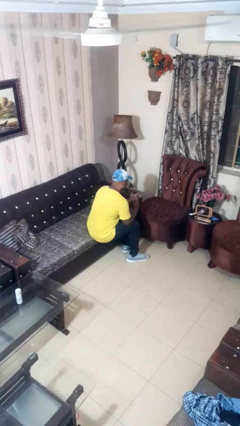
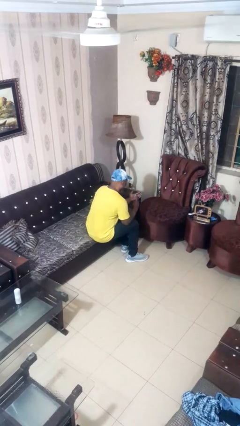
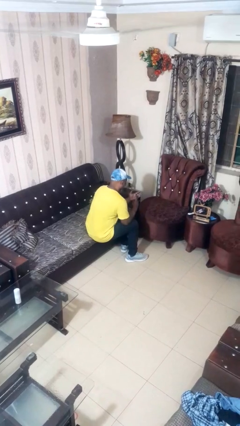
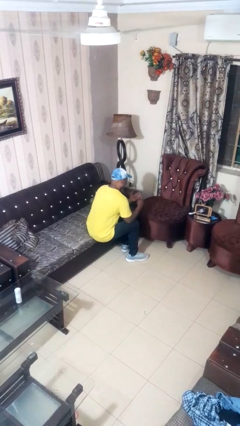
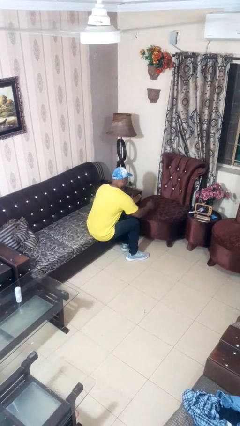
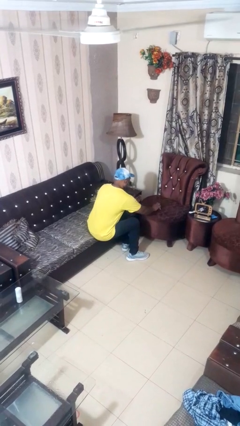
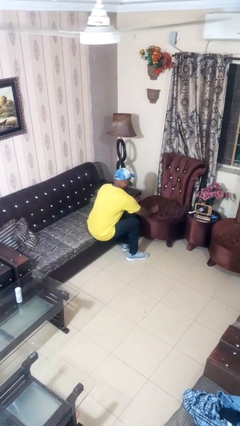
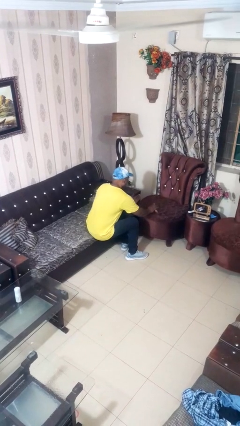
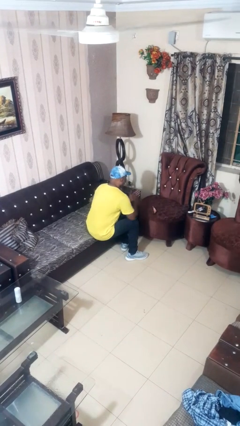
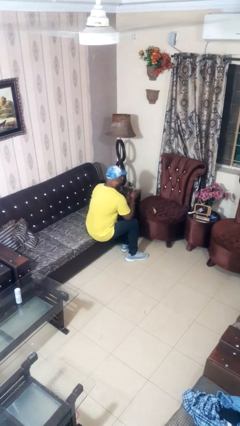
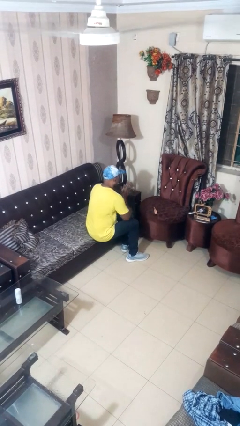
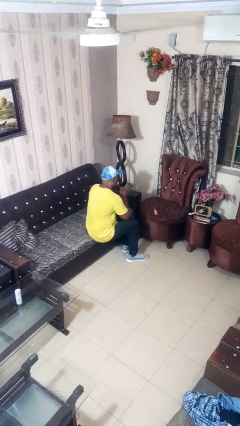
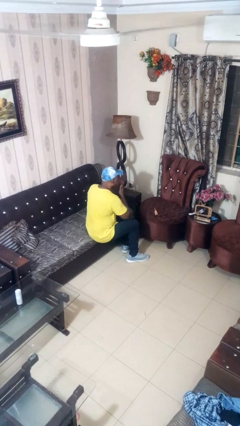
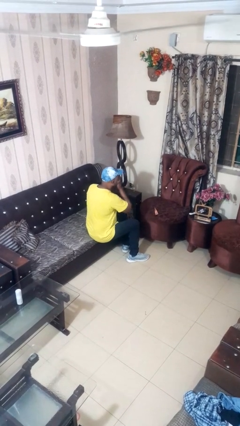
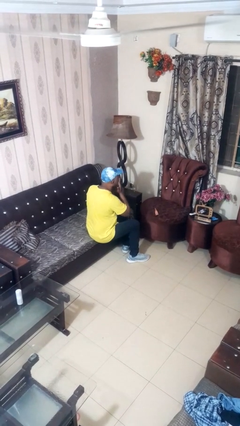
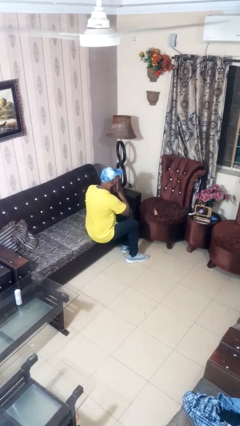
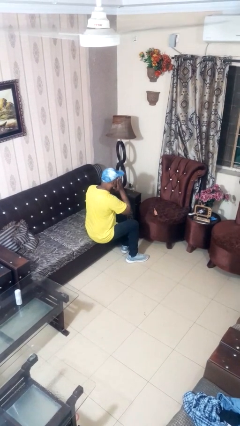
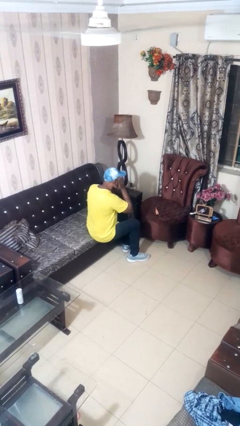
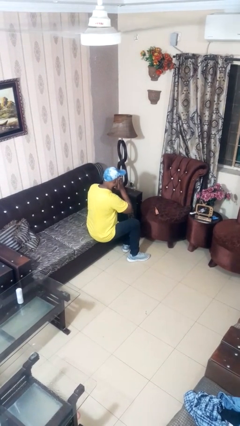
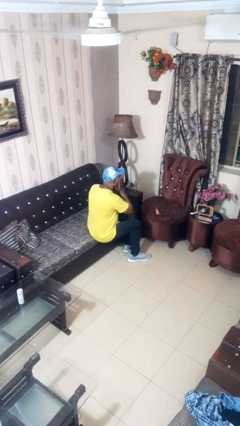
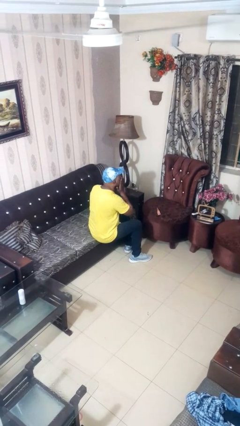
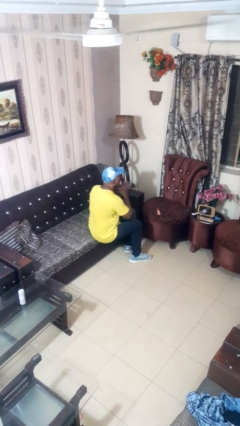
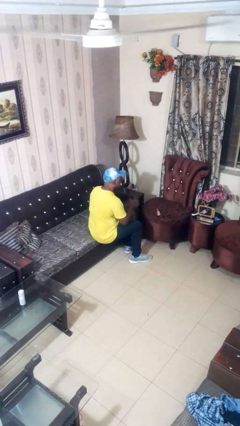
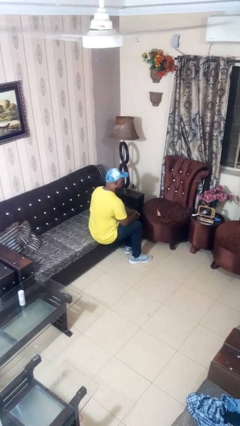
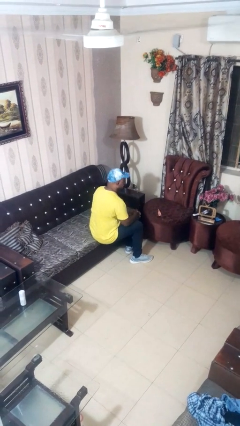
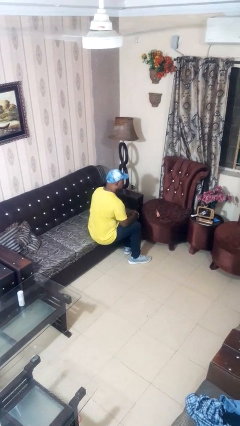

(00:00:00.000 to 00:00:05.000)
person applies foundation makeup

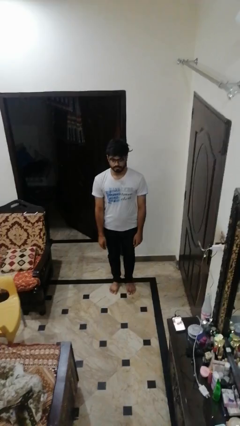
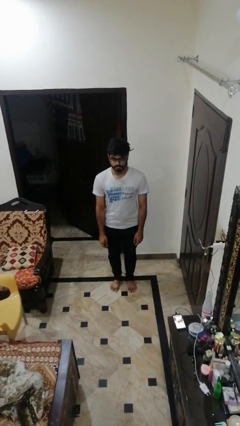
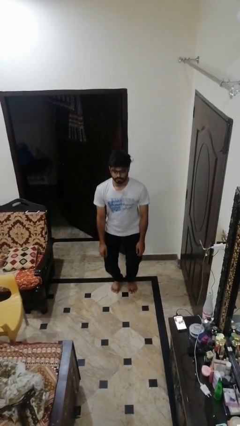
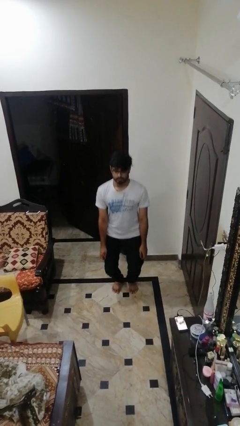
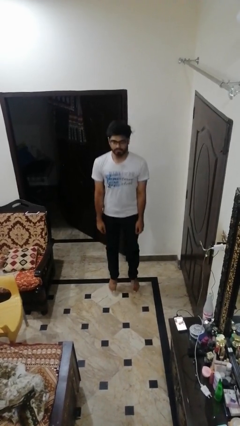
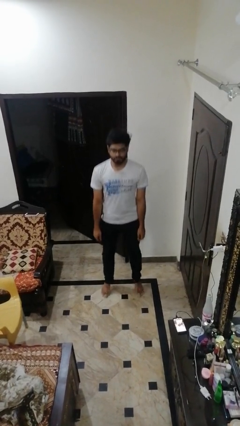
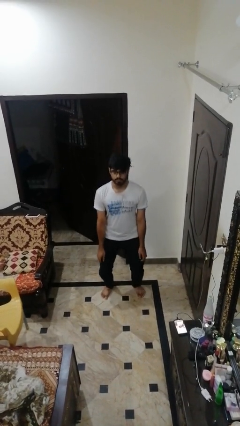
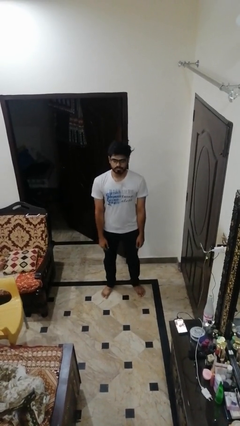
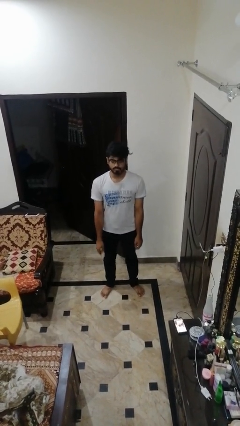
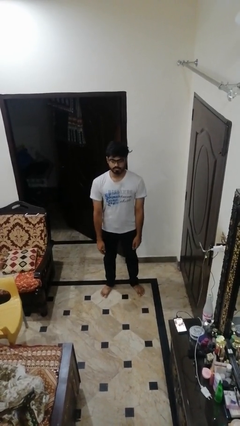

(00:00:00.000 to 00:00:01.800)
person jumps

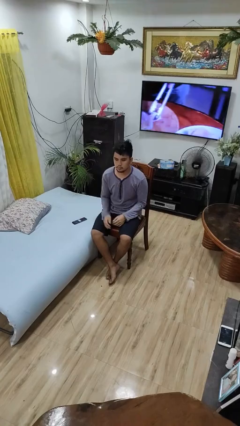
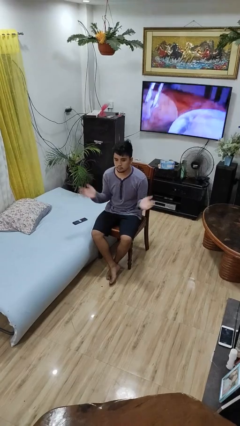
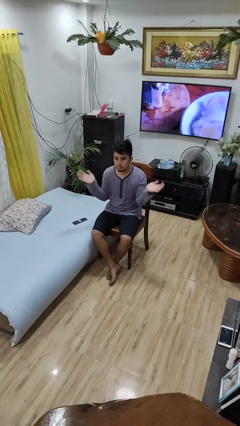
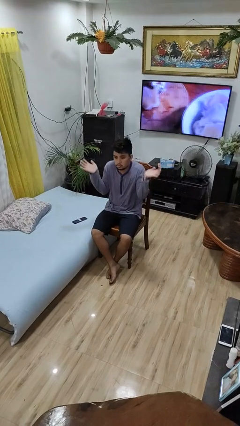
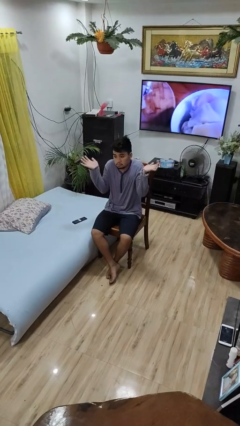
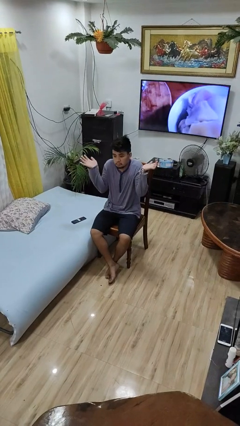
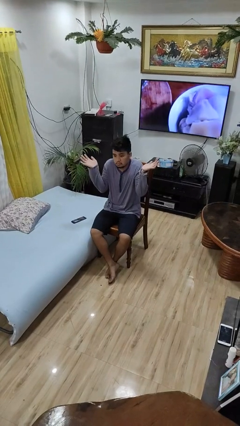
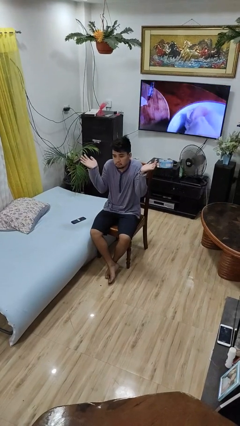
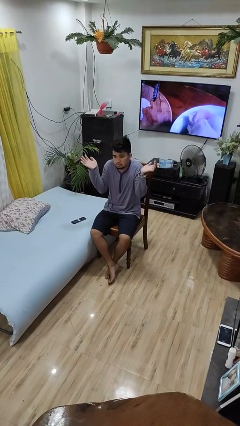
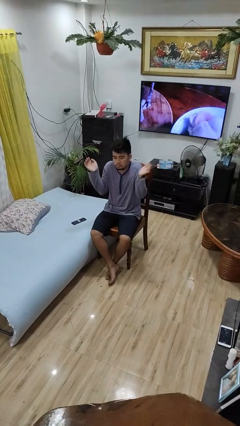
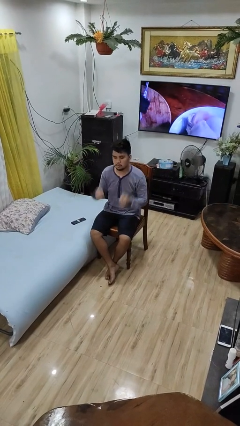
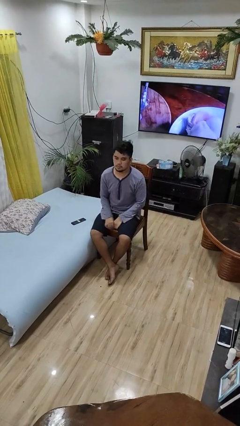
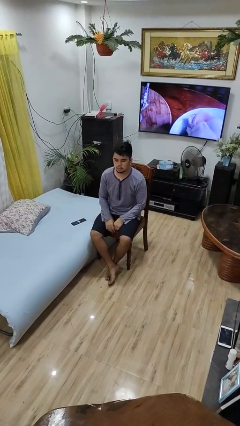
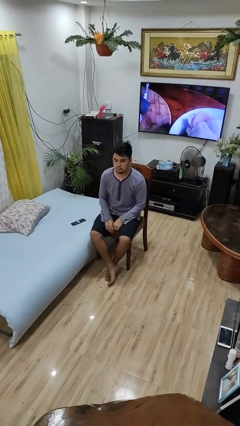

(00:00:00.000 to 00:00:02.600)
person shrugs

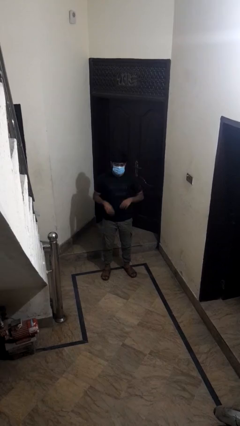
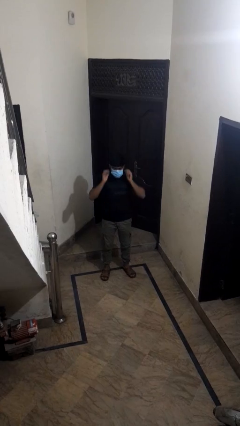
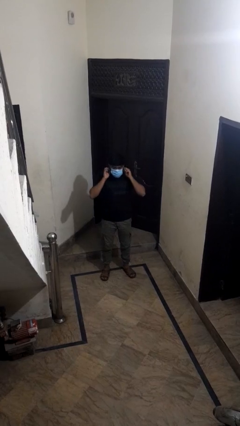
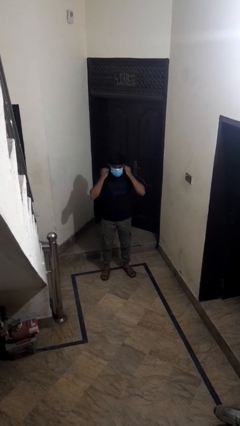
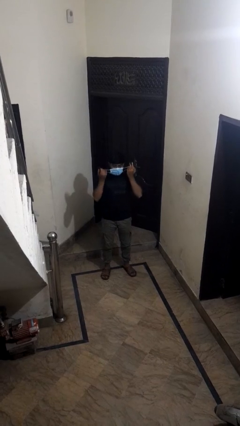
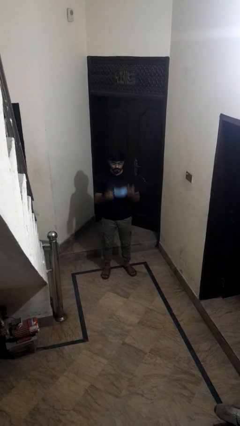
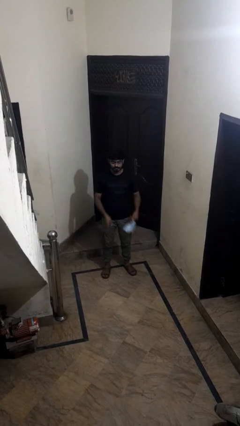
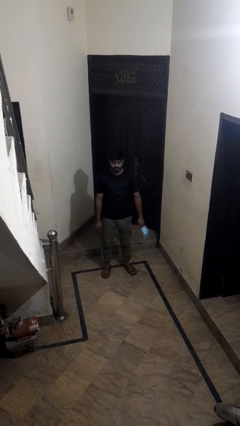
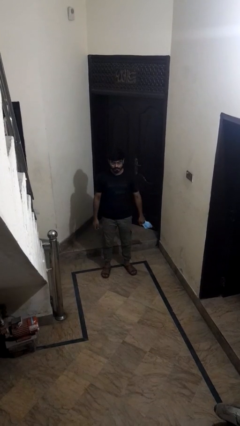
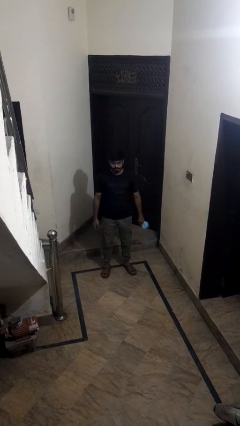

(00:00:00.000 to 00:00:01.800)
person takes off facemask

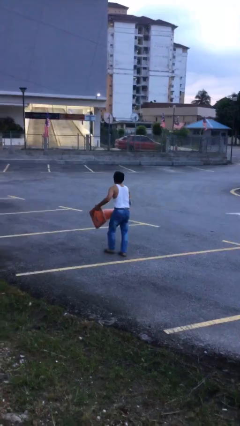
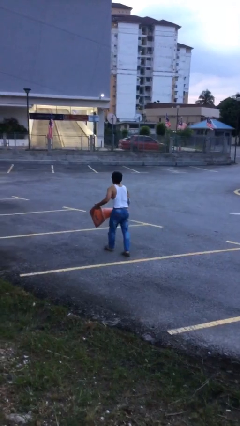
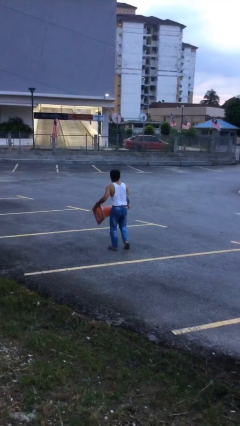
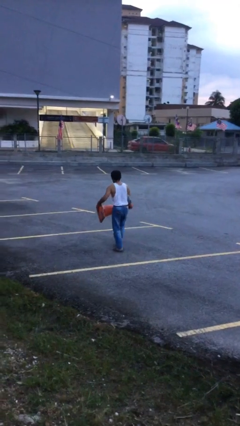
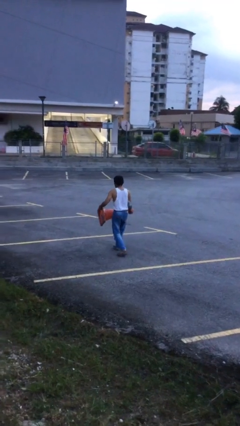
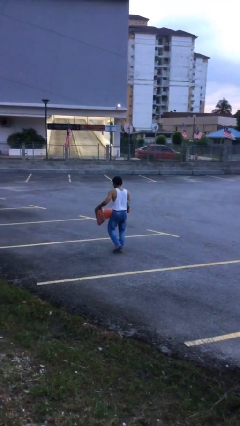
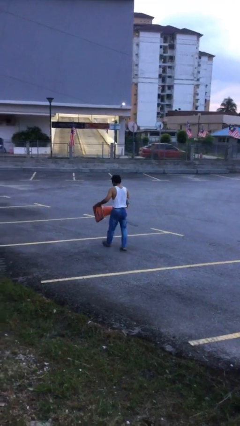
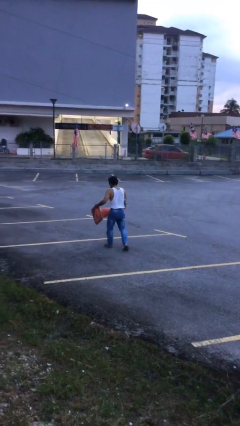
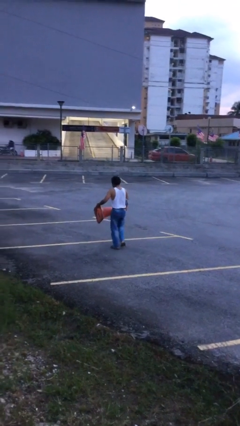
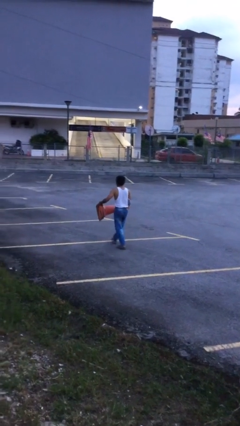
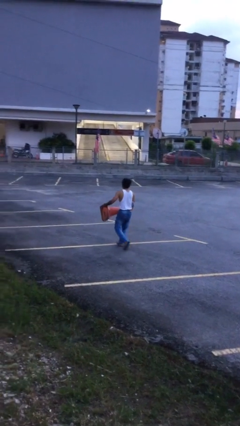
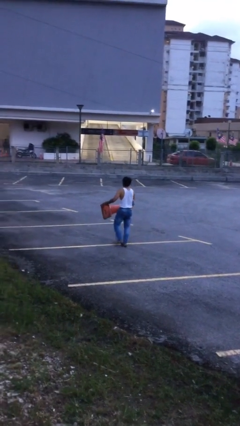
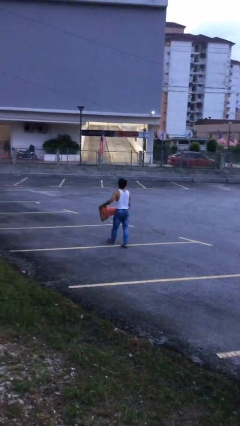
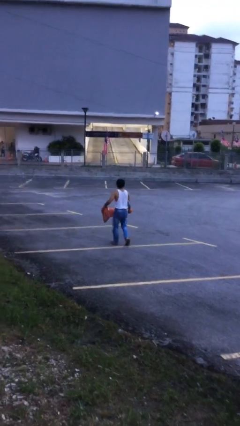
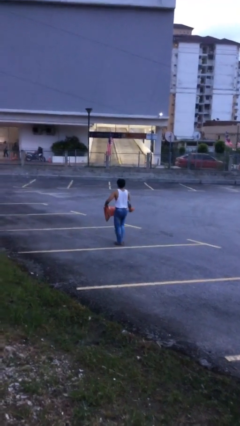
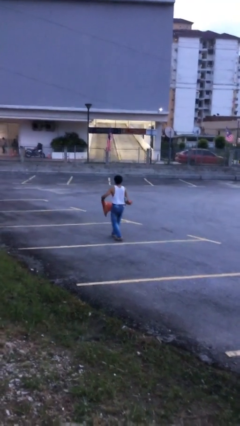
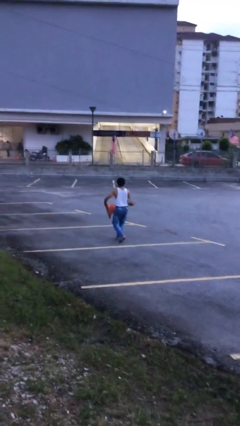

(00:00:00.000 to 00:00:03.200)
person carries heavy object

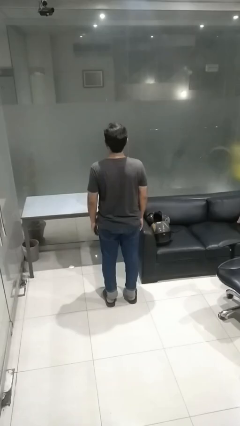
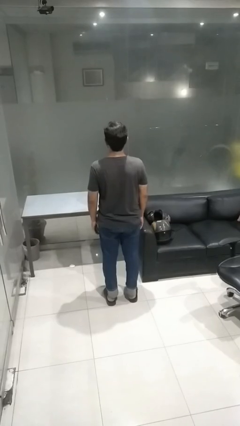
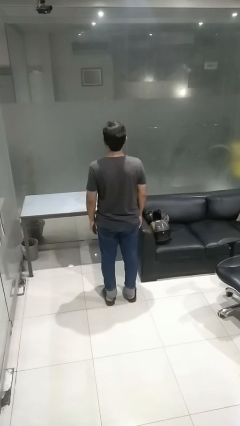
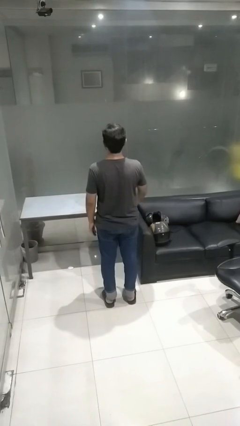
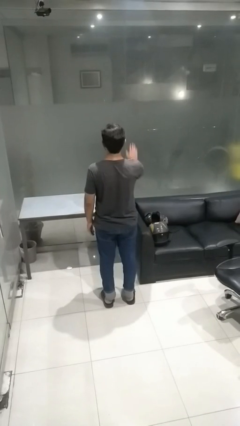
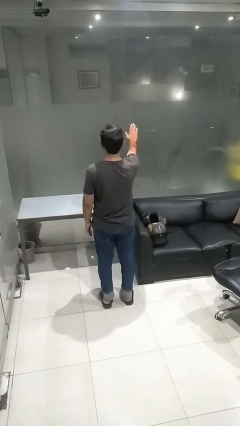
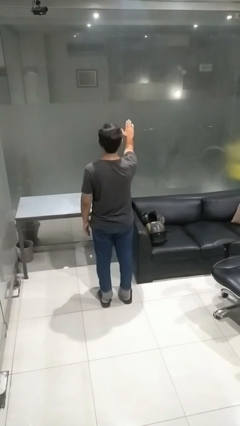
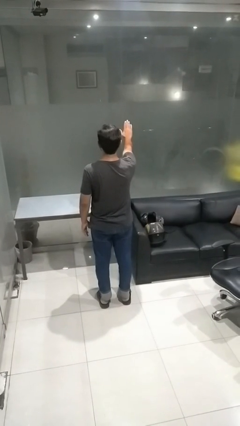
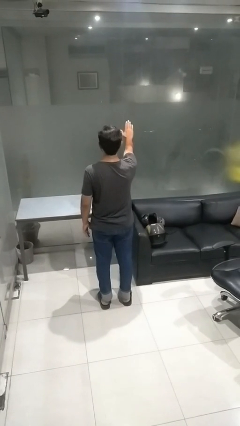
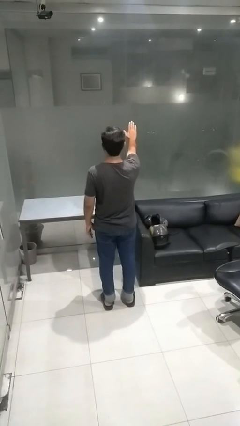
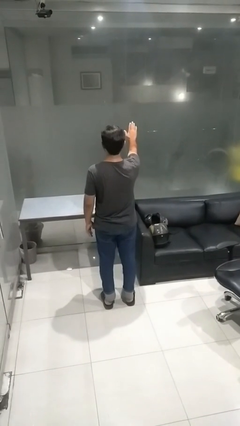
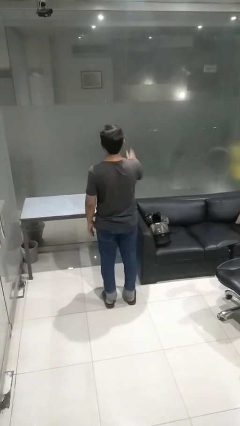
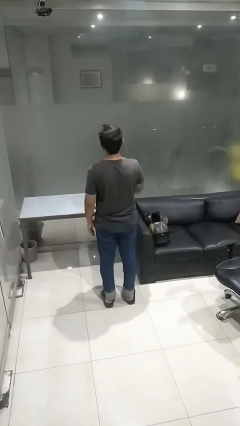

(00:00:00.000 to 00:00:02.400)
person gestures stop

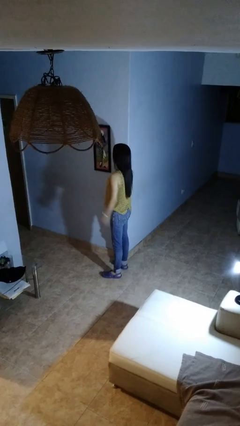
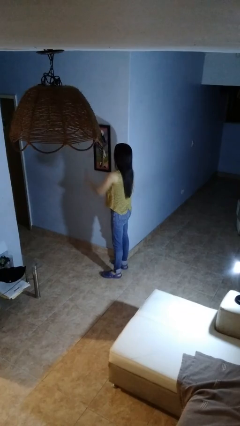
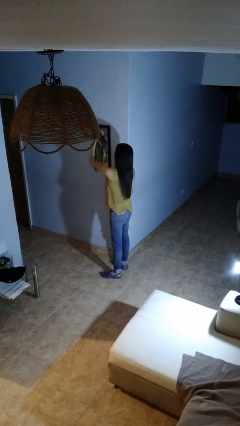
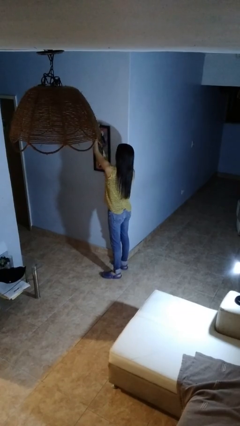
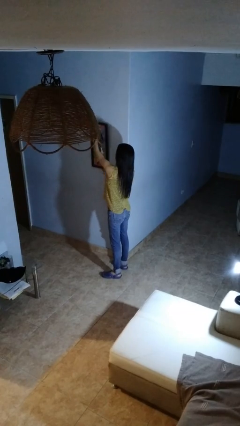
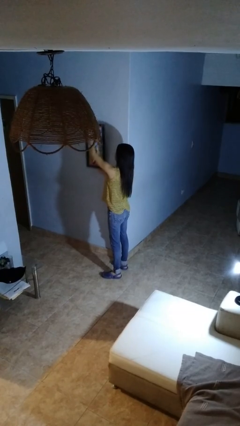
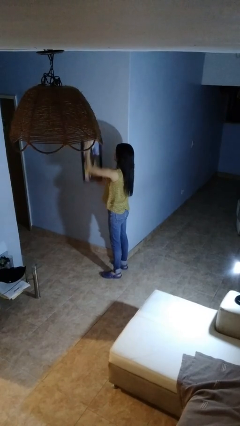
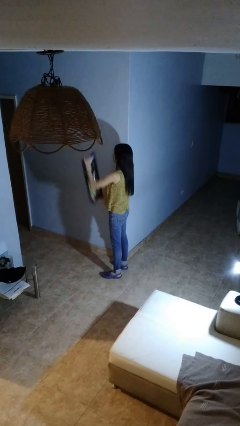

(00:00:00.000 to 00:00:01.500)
person takes down picture frame
